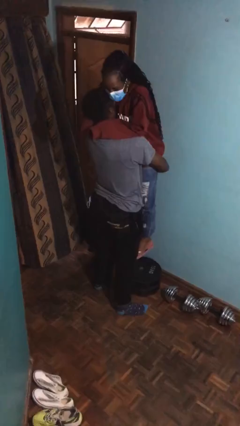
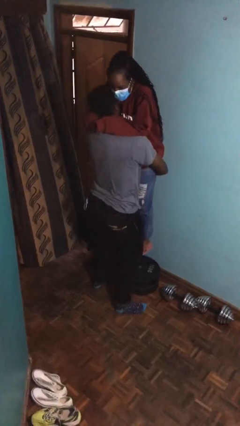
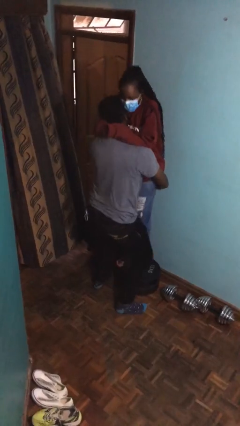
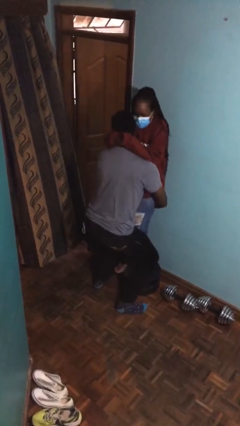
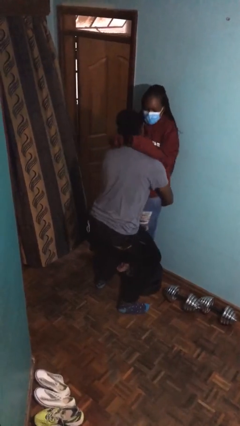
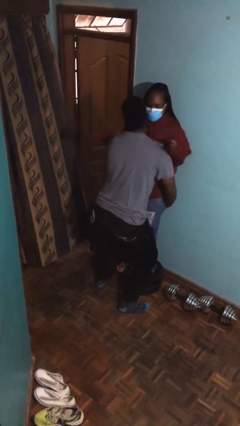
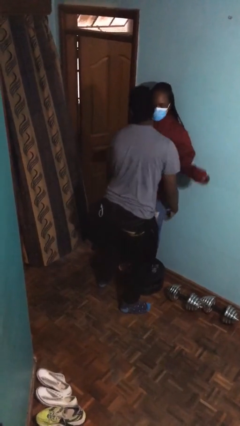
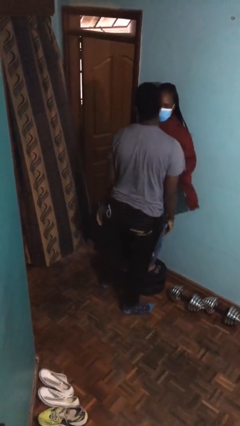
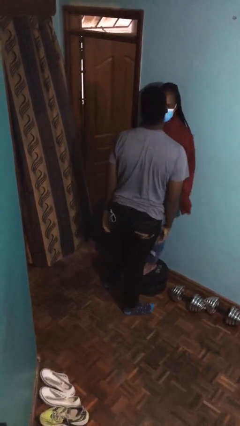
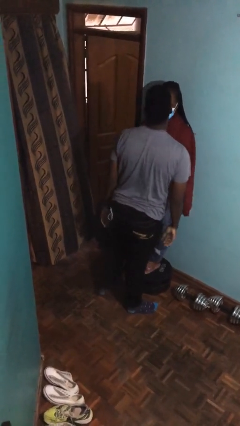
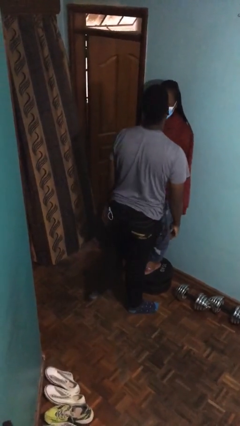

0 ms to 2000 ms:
person puts down person

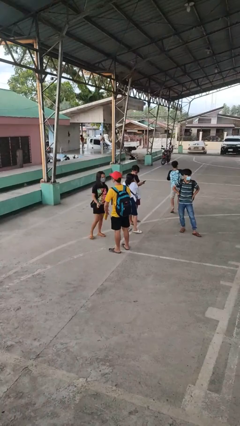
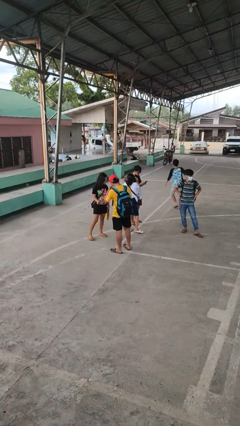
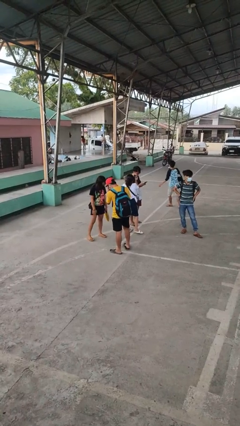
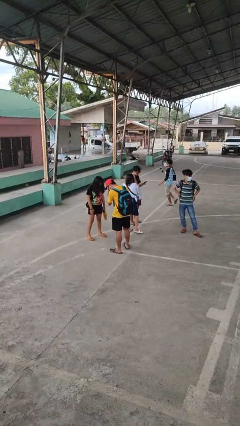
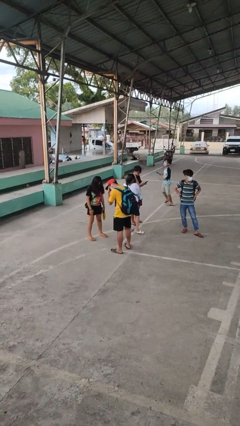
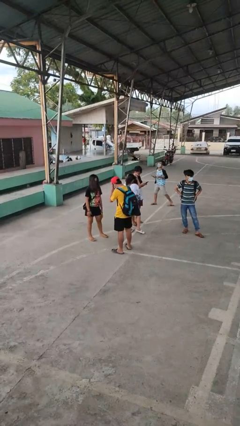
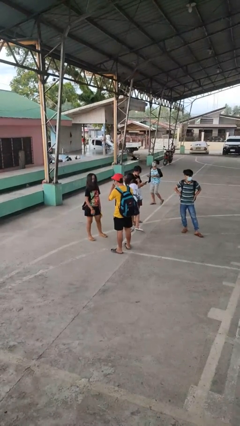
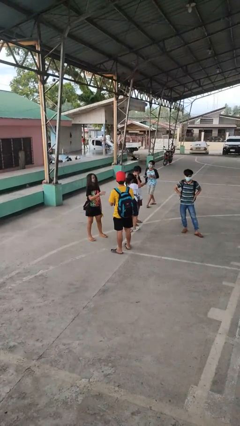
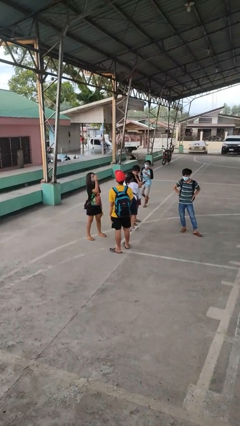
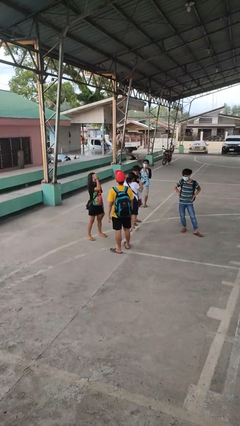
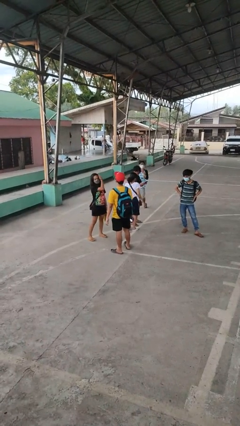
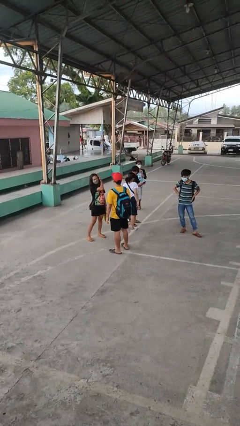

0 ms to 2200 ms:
person laughs with person

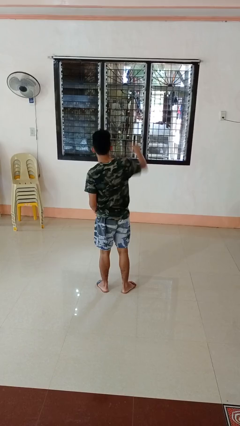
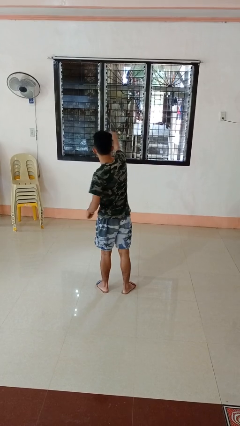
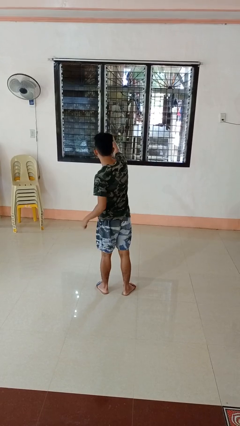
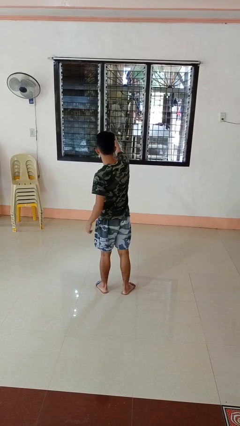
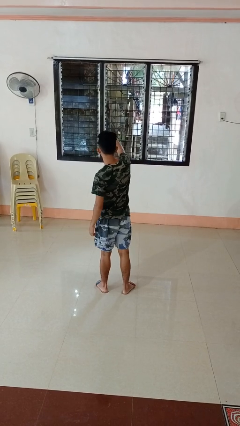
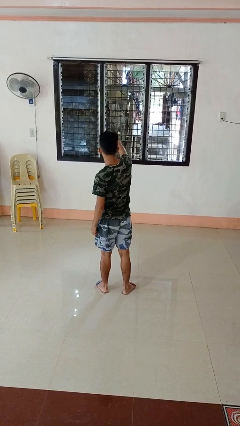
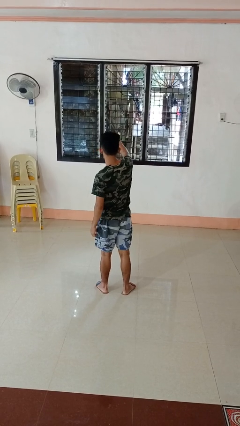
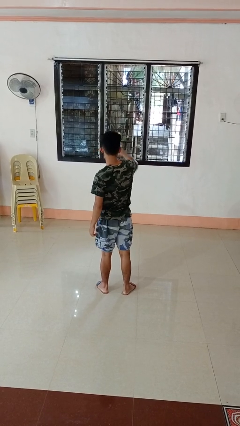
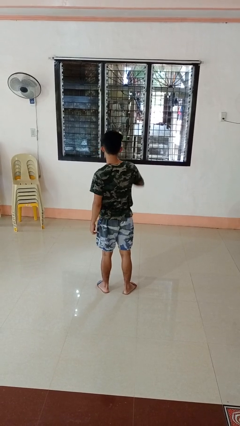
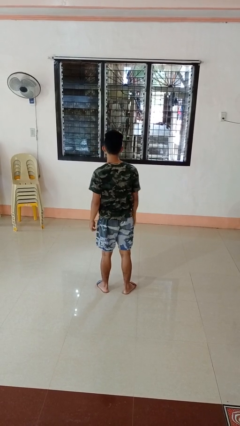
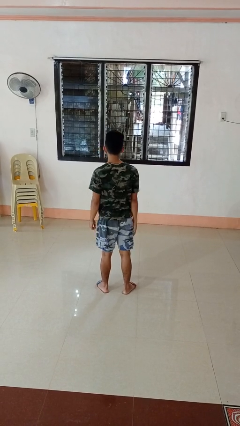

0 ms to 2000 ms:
person punches

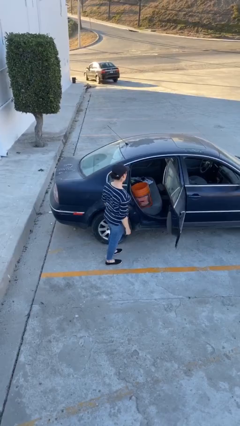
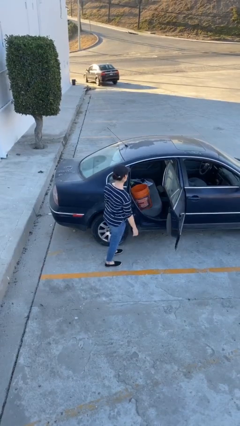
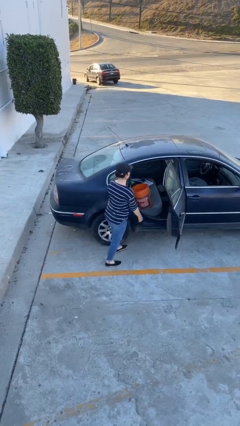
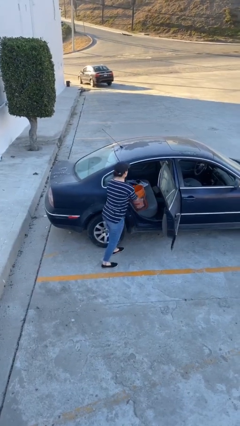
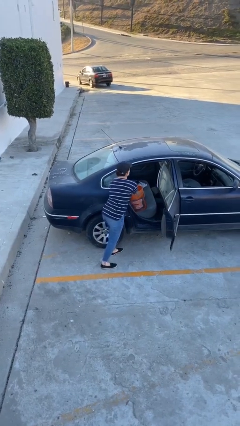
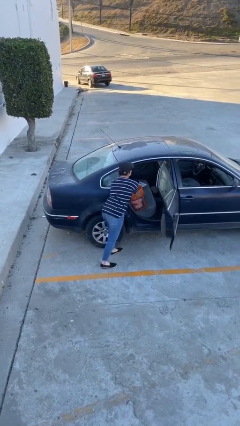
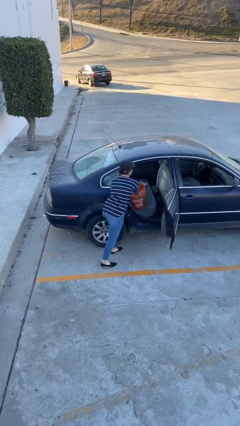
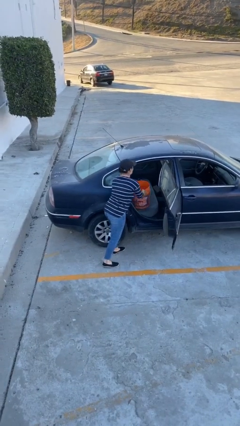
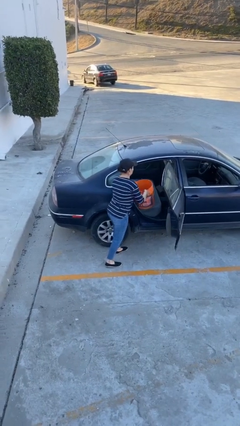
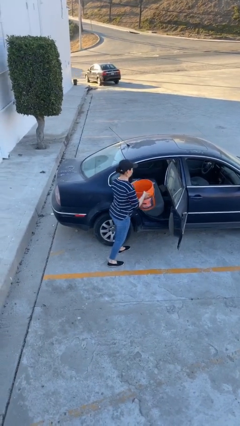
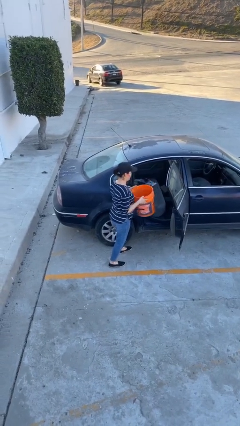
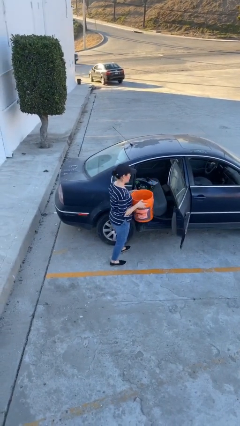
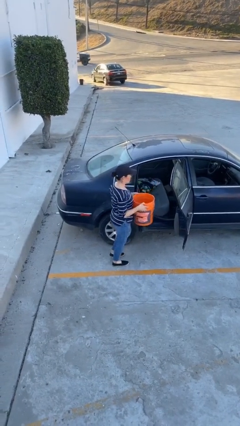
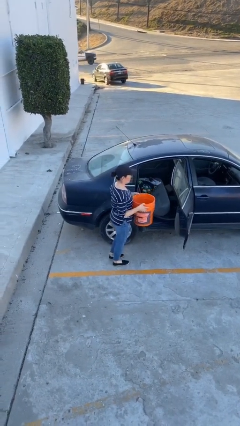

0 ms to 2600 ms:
person unloads car

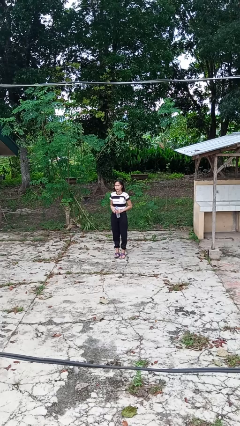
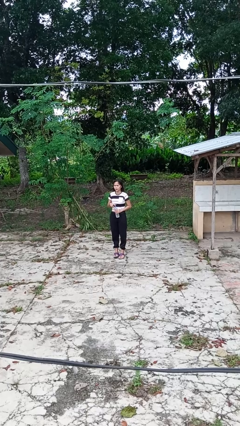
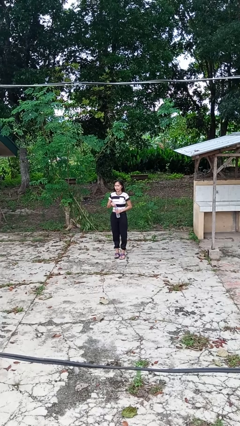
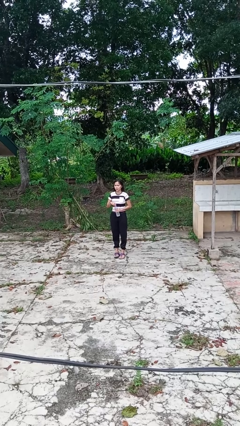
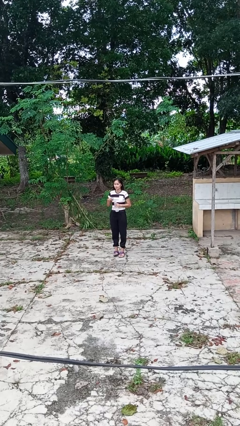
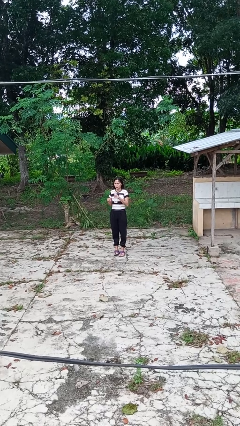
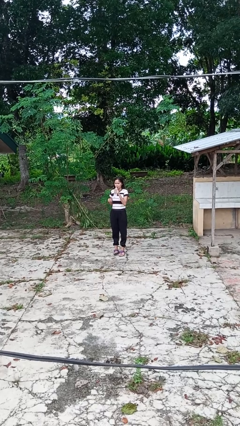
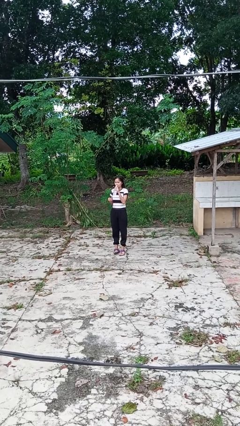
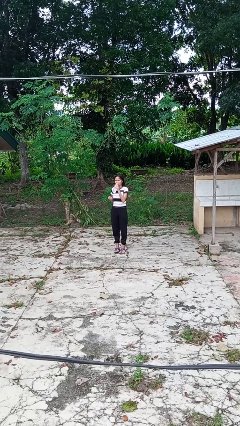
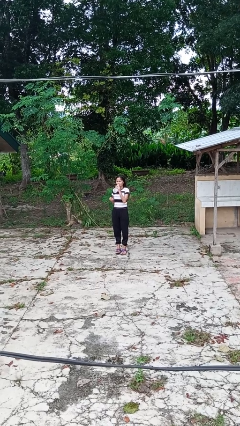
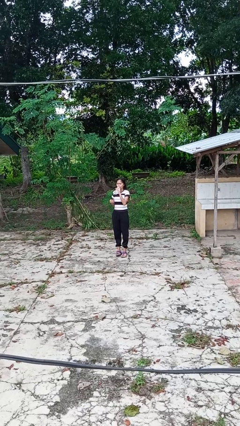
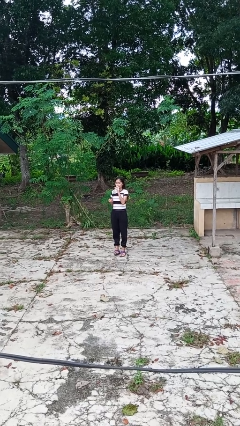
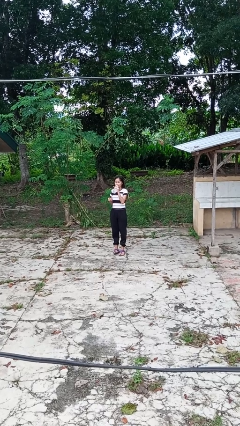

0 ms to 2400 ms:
person drinks from bottle

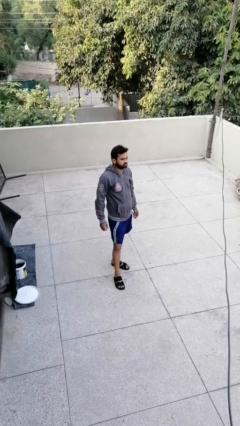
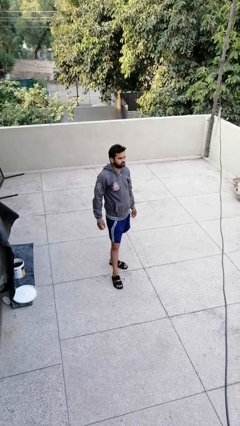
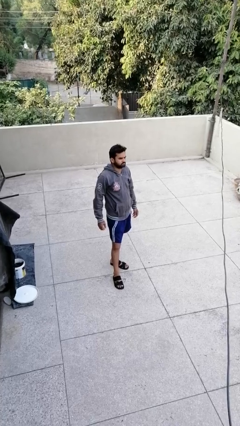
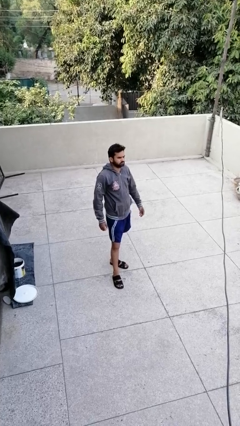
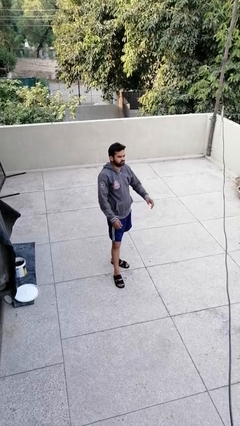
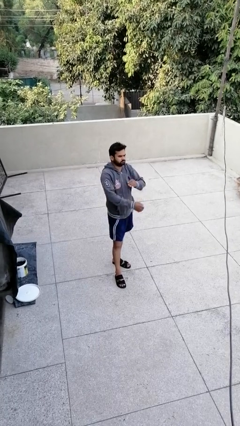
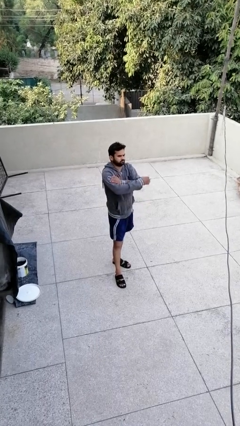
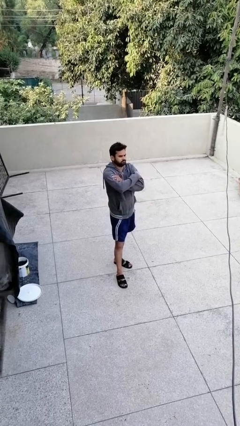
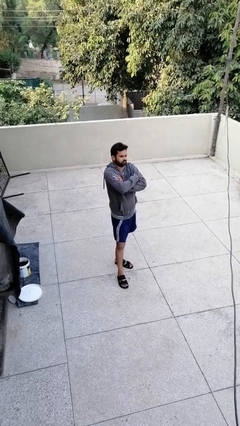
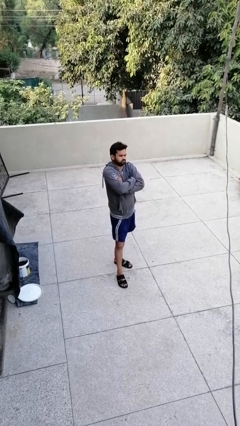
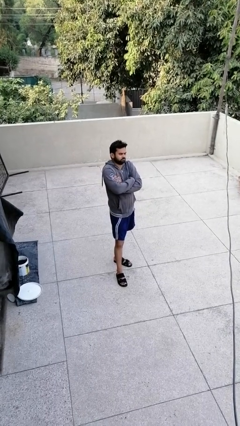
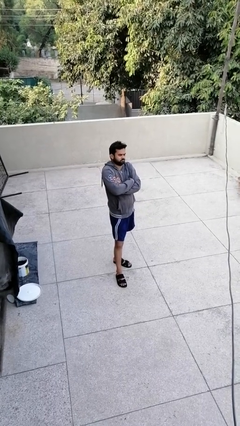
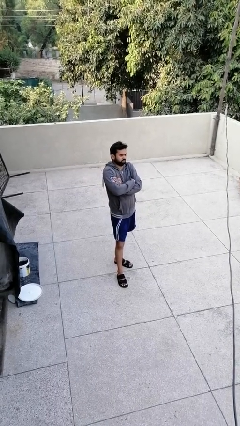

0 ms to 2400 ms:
person crosses arms

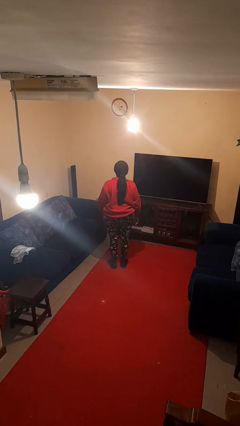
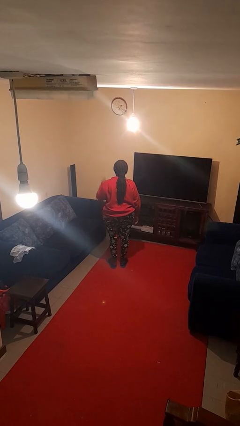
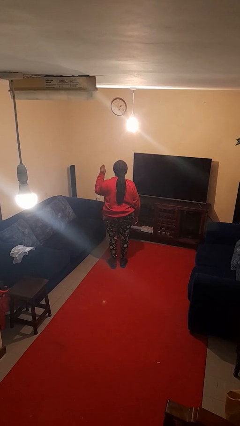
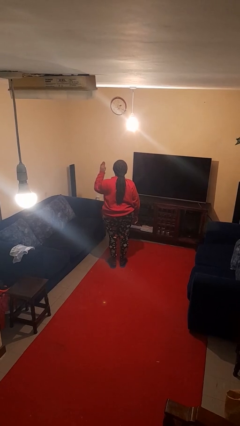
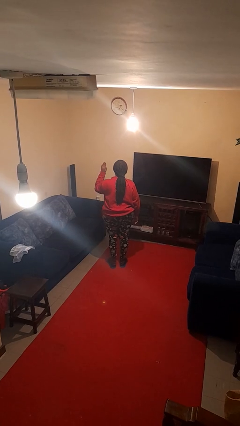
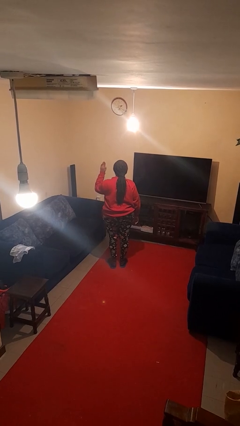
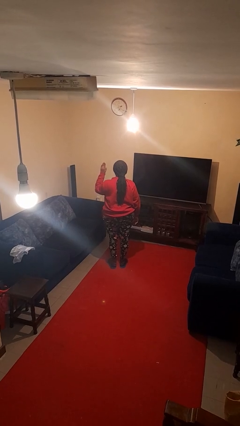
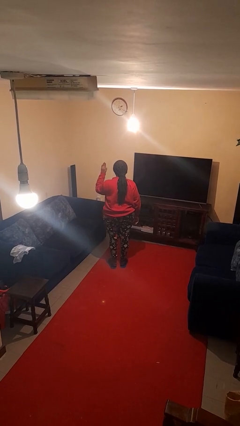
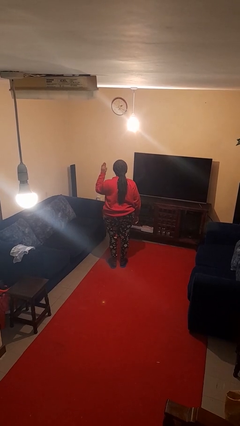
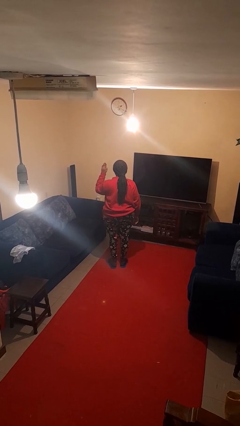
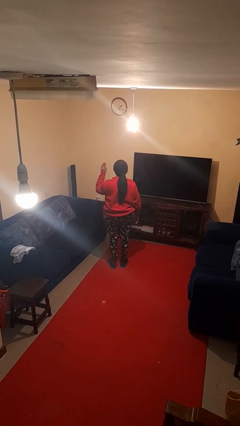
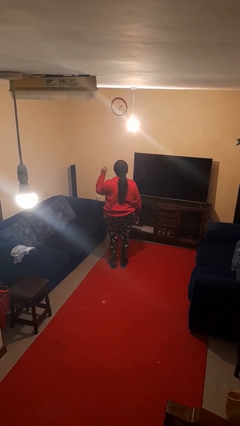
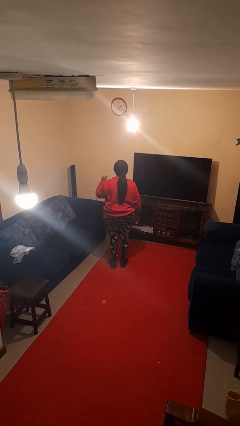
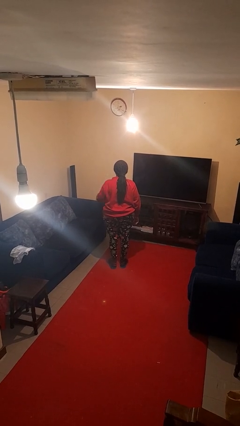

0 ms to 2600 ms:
person gestures stop

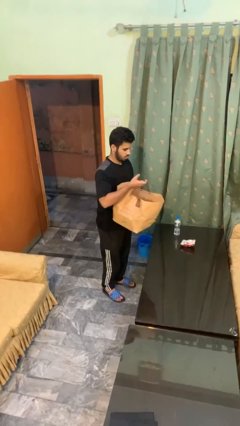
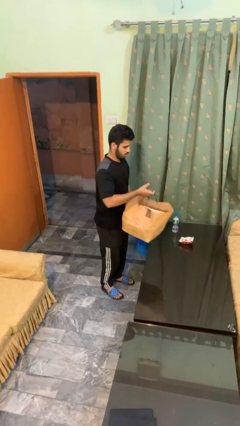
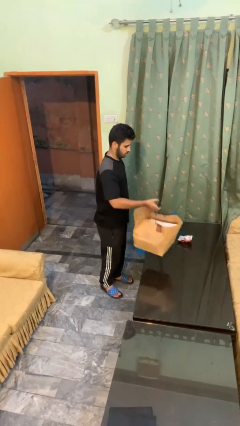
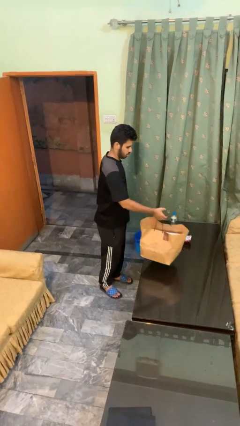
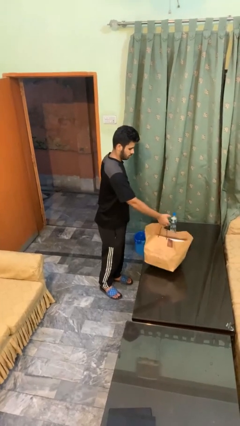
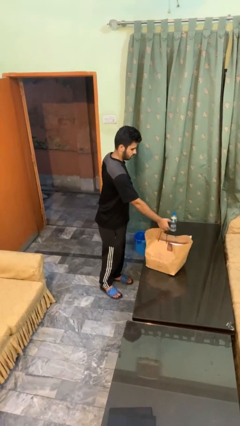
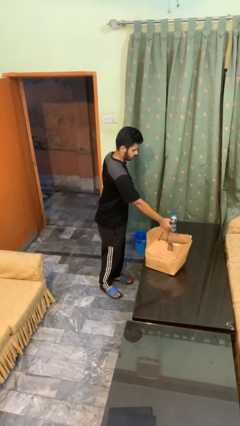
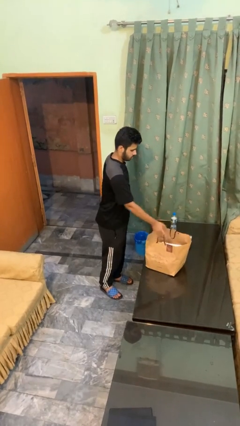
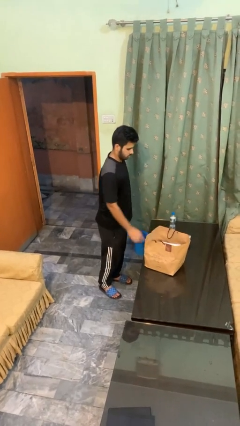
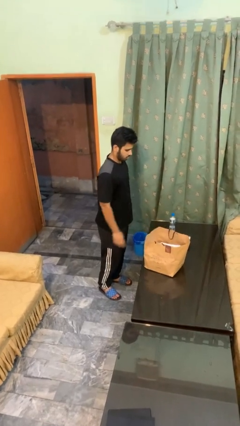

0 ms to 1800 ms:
person puts down object on countertop
